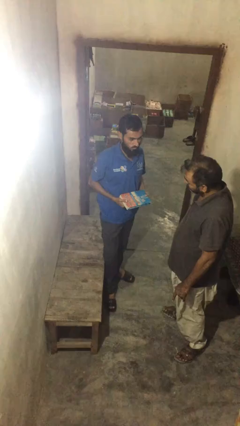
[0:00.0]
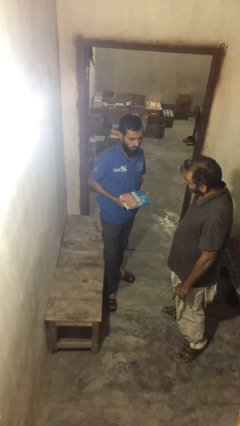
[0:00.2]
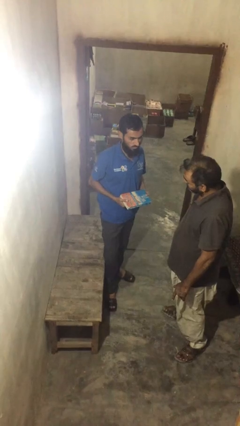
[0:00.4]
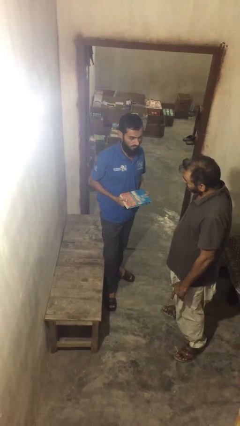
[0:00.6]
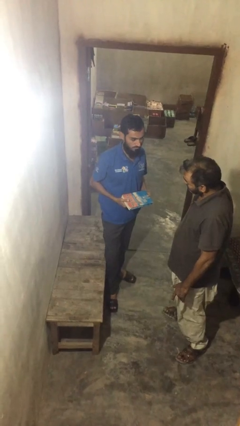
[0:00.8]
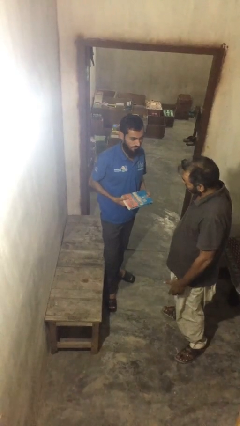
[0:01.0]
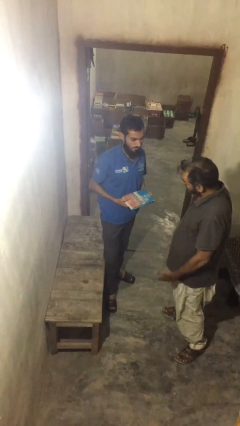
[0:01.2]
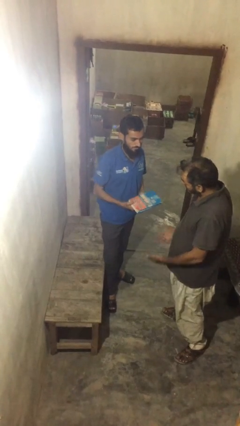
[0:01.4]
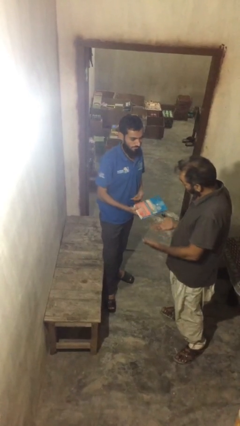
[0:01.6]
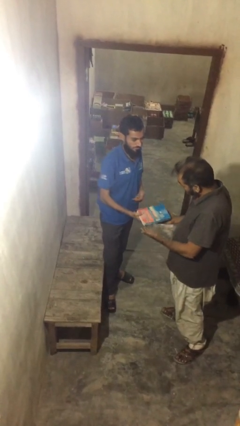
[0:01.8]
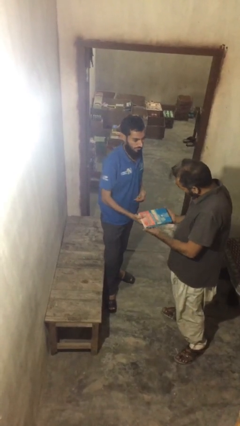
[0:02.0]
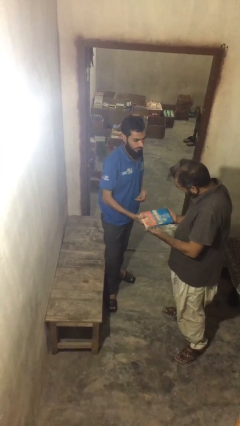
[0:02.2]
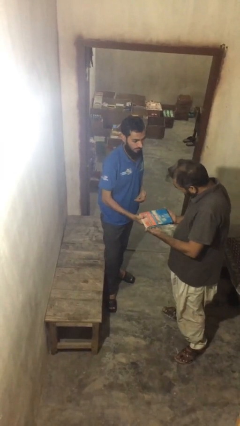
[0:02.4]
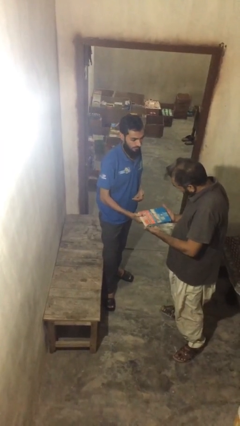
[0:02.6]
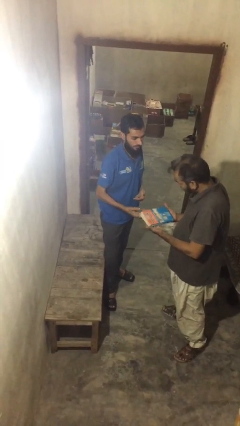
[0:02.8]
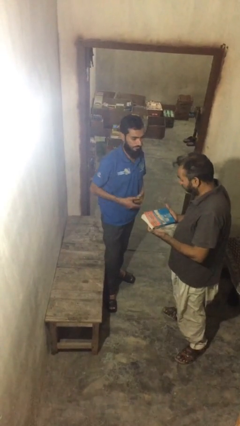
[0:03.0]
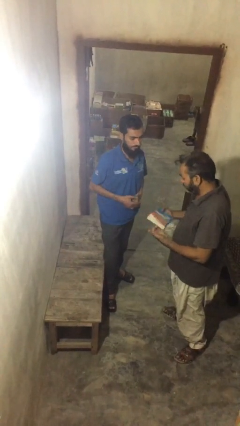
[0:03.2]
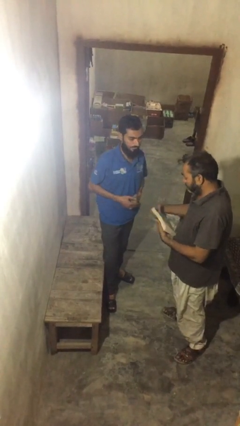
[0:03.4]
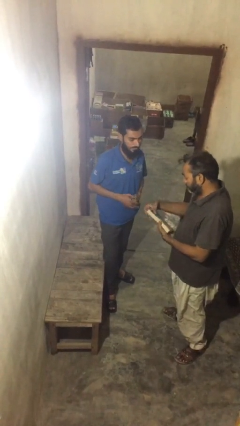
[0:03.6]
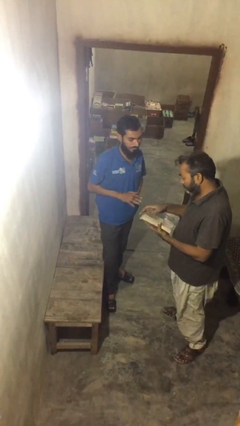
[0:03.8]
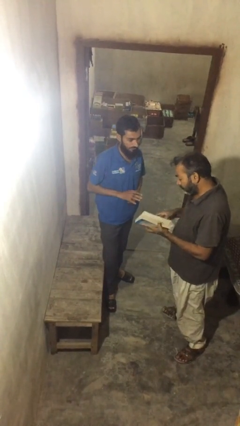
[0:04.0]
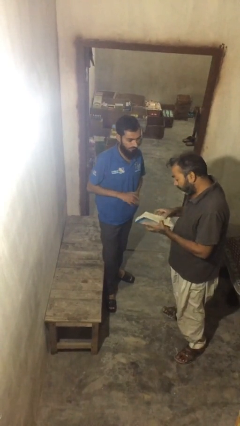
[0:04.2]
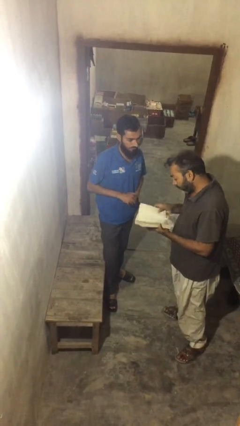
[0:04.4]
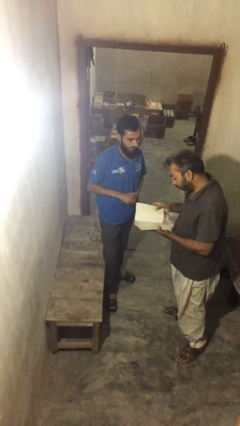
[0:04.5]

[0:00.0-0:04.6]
person transfers object to person

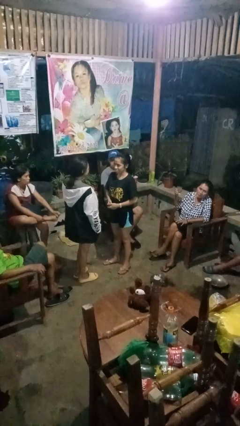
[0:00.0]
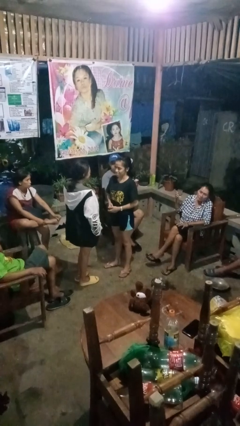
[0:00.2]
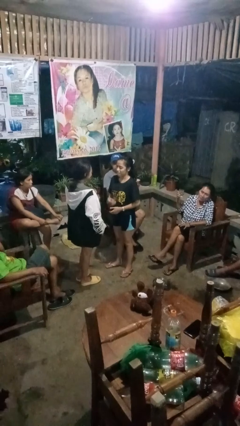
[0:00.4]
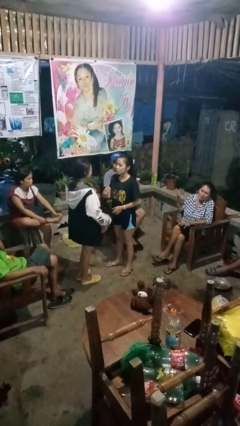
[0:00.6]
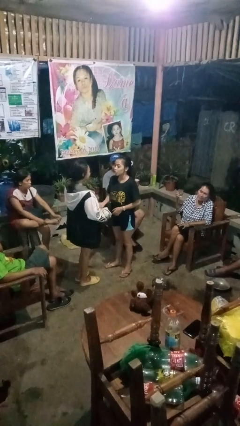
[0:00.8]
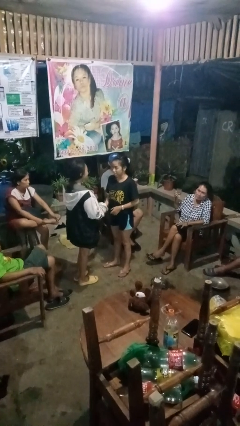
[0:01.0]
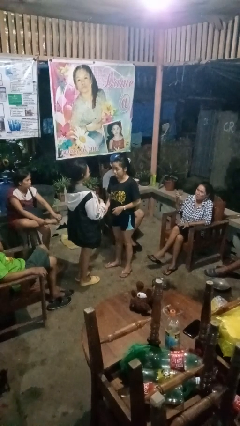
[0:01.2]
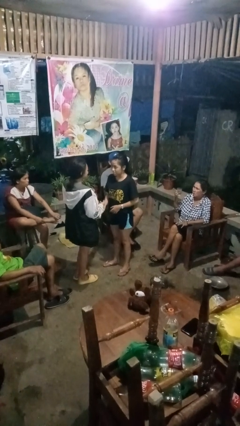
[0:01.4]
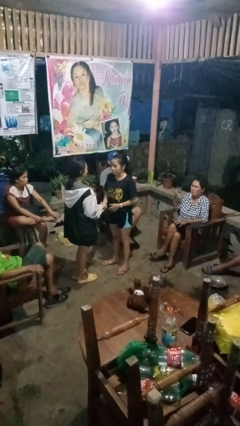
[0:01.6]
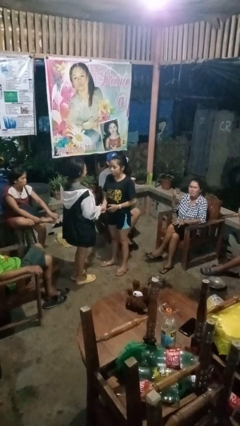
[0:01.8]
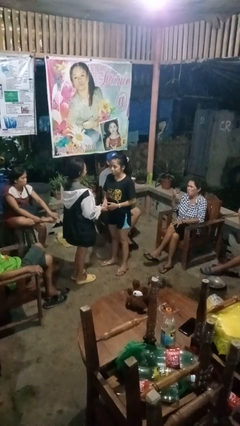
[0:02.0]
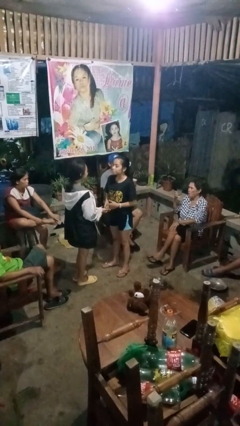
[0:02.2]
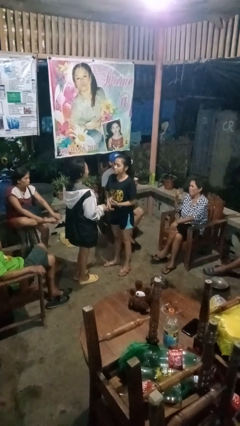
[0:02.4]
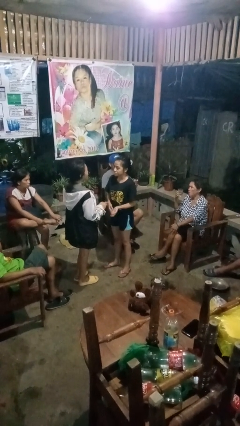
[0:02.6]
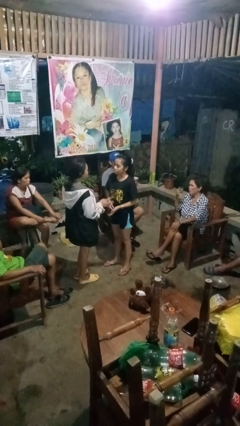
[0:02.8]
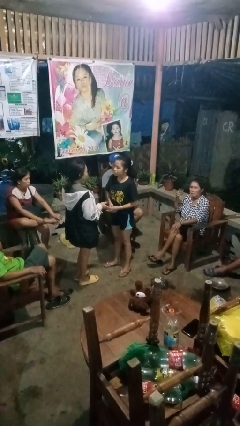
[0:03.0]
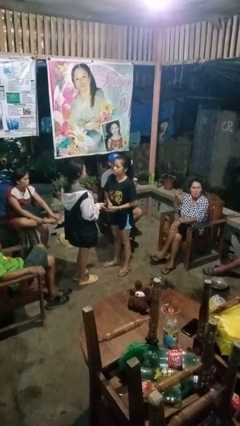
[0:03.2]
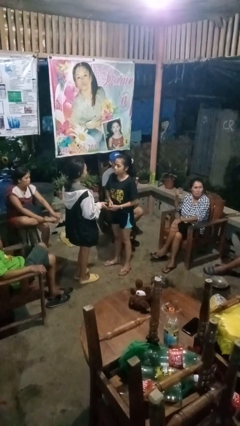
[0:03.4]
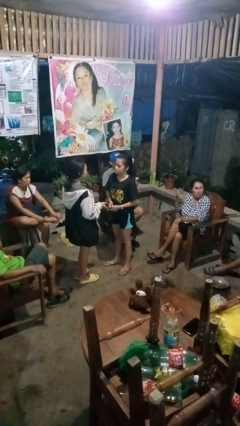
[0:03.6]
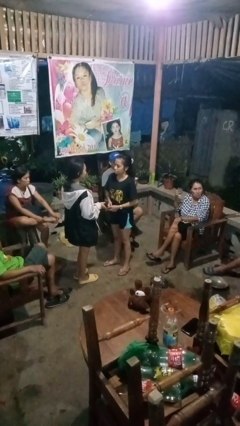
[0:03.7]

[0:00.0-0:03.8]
person talks to person

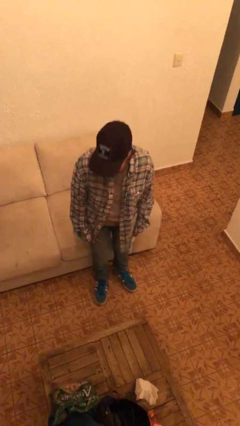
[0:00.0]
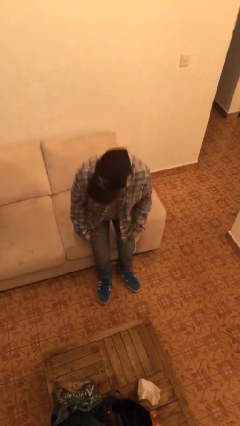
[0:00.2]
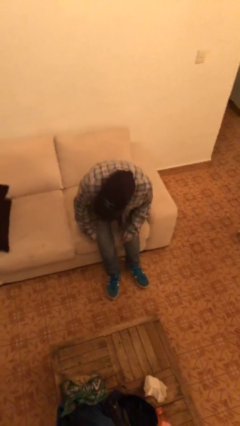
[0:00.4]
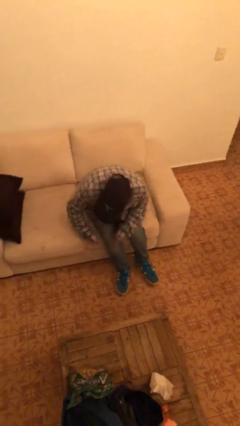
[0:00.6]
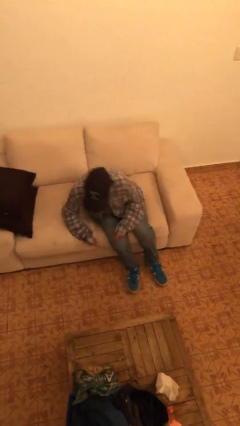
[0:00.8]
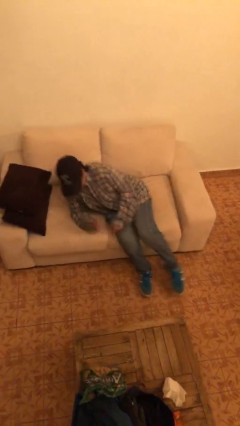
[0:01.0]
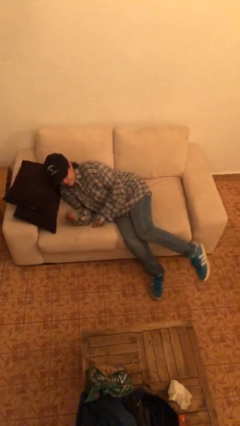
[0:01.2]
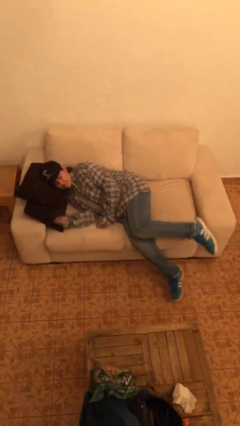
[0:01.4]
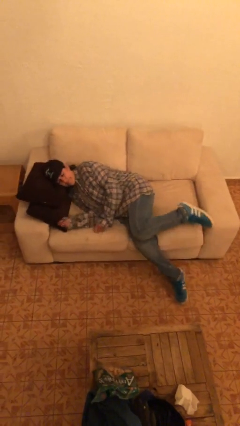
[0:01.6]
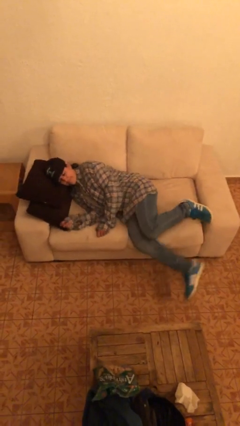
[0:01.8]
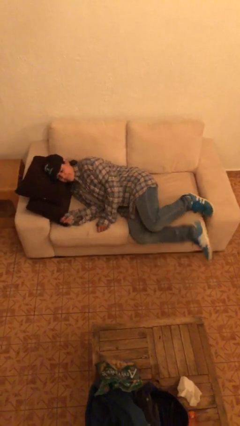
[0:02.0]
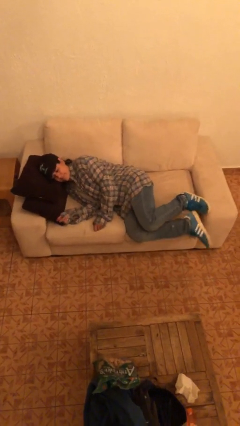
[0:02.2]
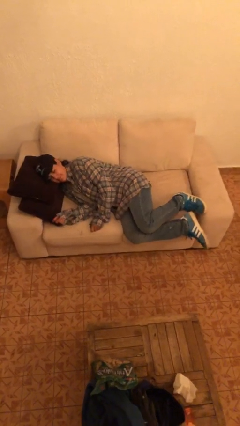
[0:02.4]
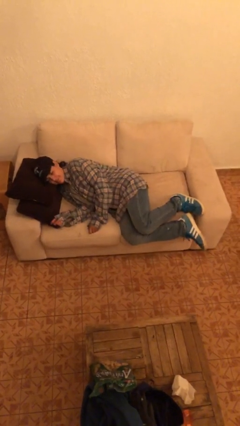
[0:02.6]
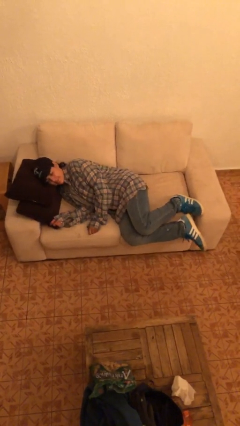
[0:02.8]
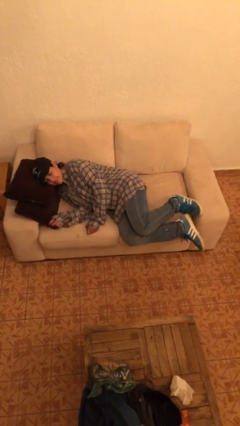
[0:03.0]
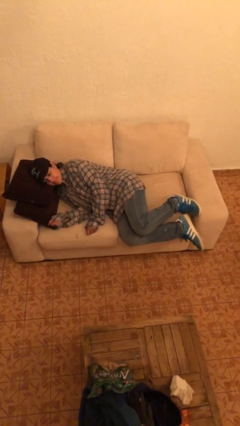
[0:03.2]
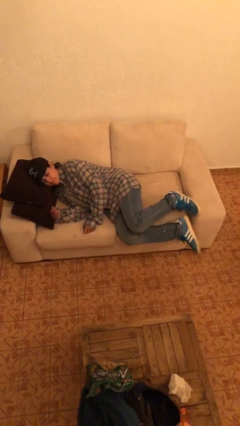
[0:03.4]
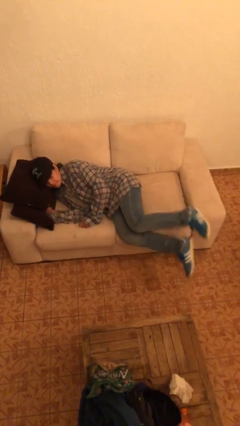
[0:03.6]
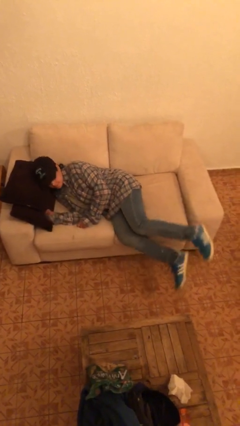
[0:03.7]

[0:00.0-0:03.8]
person lies down on couch

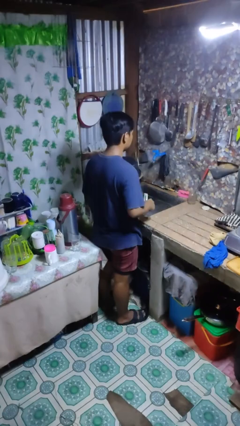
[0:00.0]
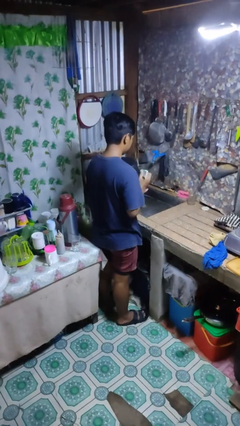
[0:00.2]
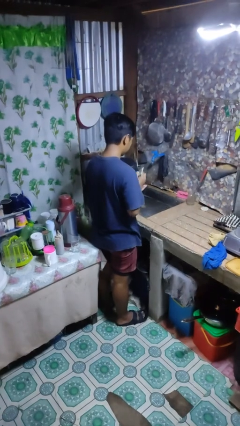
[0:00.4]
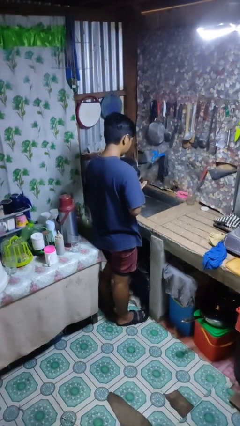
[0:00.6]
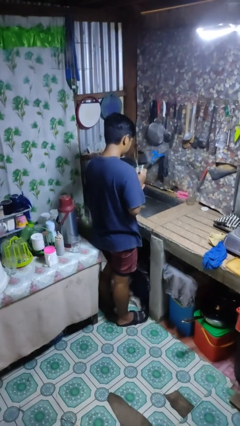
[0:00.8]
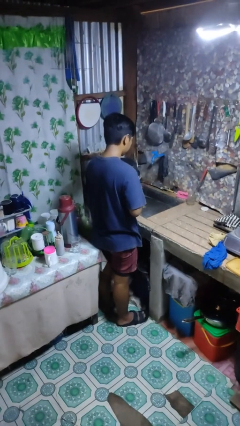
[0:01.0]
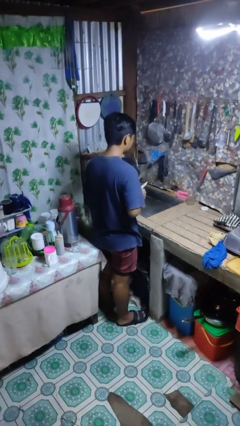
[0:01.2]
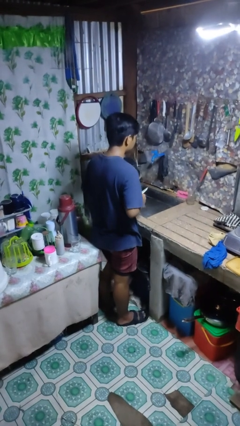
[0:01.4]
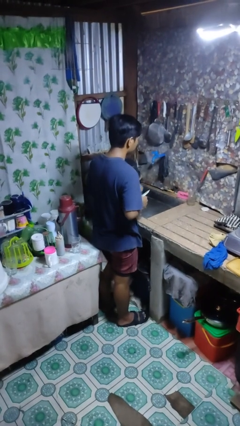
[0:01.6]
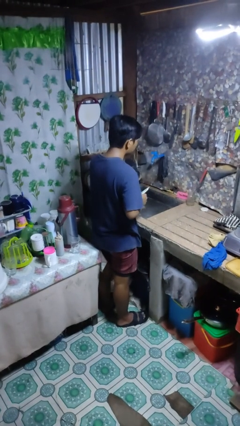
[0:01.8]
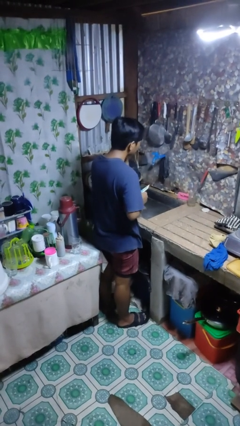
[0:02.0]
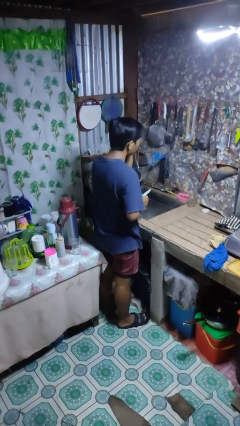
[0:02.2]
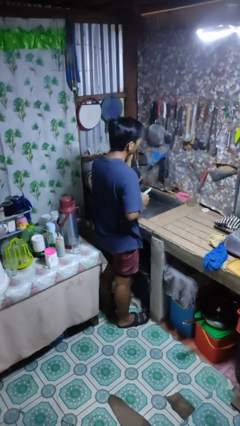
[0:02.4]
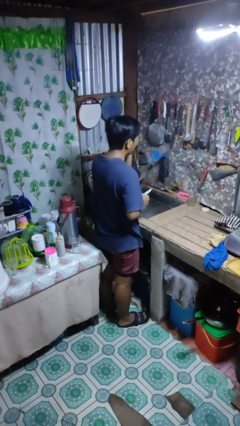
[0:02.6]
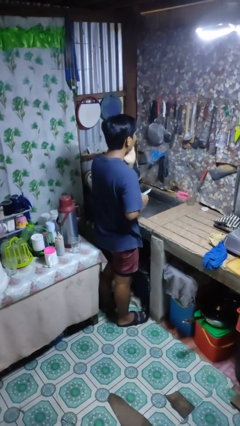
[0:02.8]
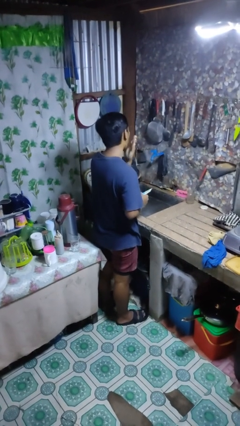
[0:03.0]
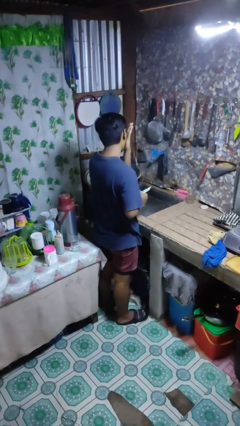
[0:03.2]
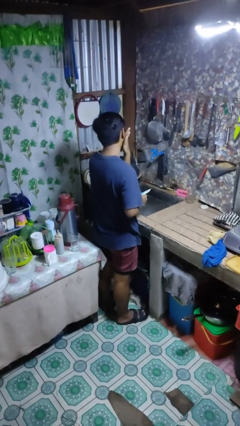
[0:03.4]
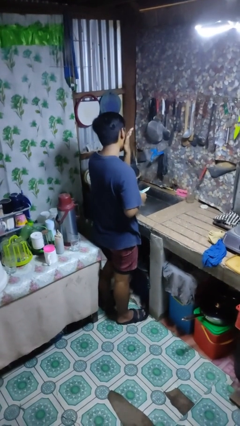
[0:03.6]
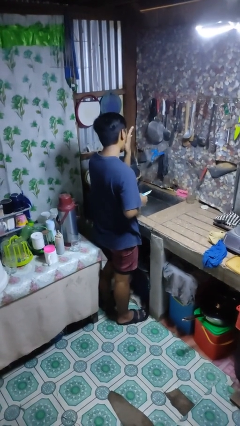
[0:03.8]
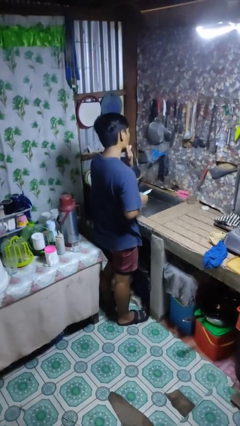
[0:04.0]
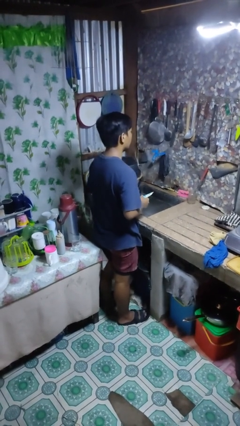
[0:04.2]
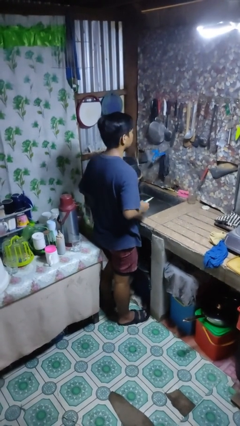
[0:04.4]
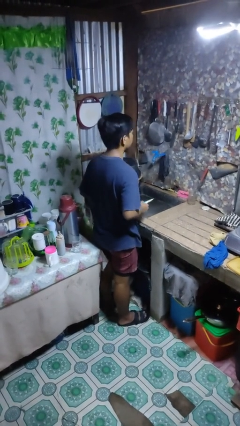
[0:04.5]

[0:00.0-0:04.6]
person applies facial moisturizer

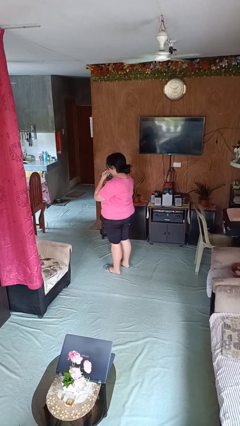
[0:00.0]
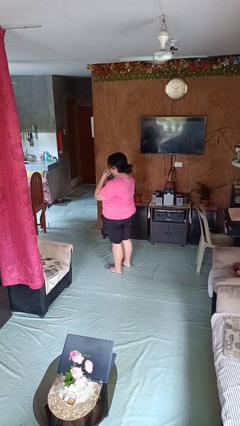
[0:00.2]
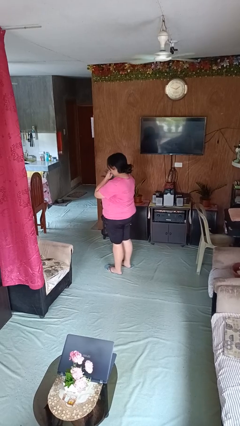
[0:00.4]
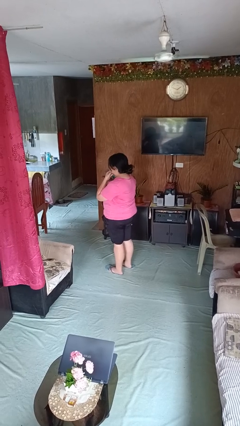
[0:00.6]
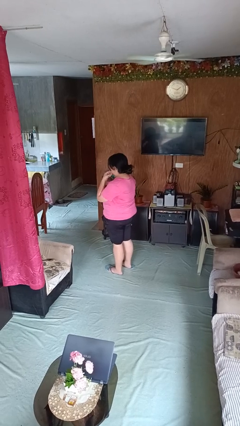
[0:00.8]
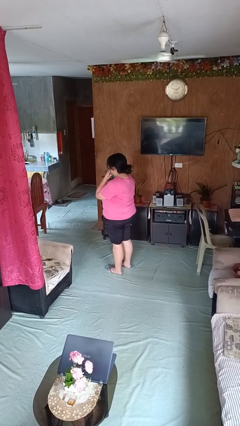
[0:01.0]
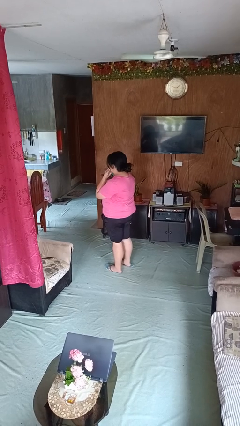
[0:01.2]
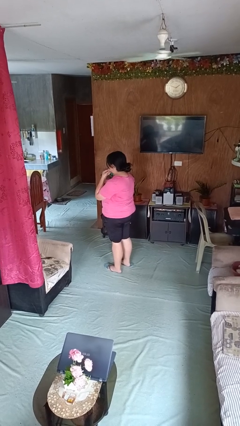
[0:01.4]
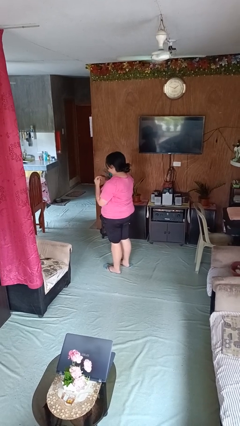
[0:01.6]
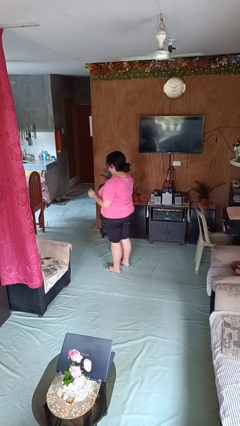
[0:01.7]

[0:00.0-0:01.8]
person strokes chin
